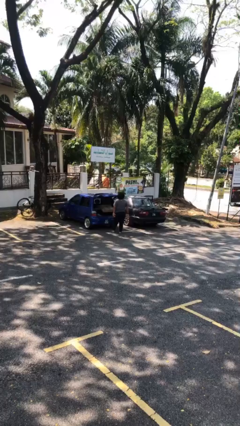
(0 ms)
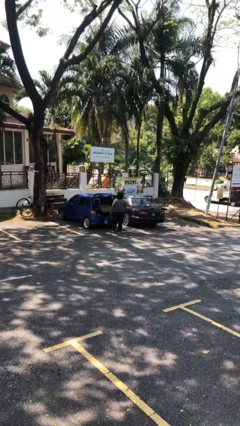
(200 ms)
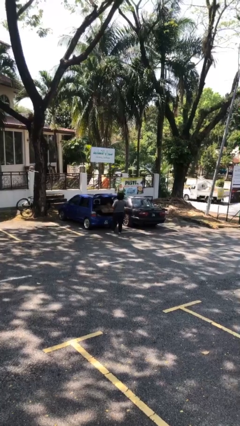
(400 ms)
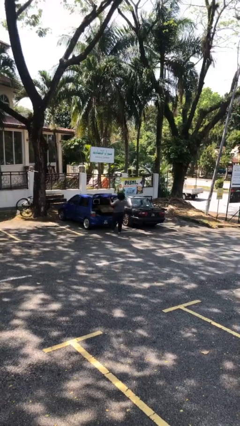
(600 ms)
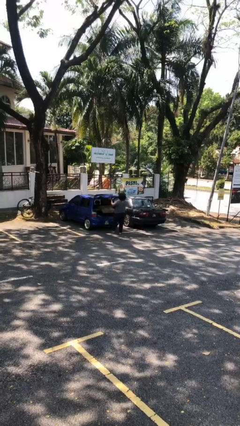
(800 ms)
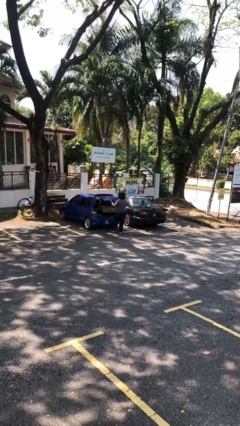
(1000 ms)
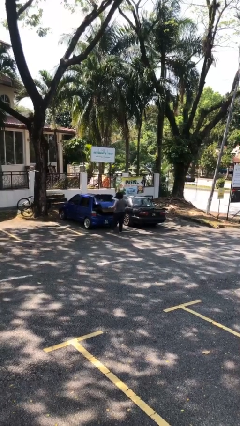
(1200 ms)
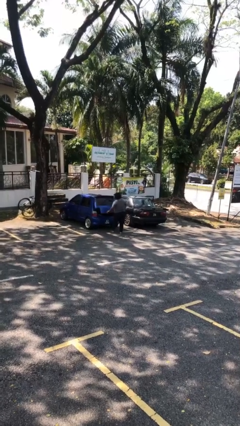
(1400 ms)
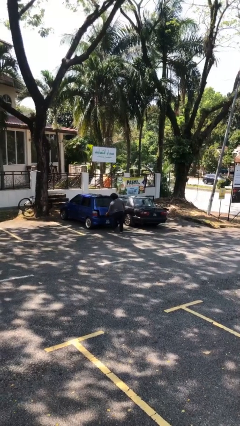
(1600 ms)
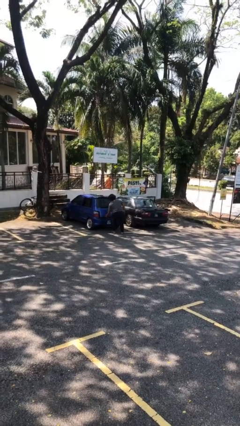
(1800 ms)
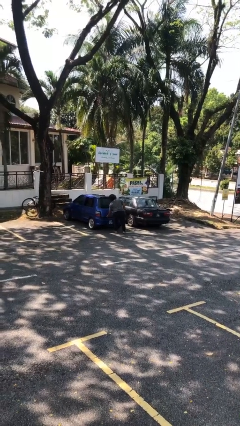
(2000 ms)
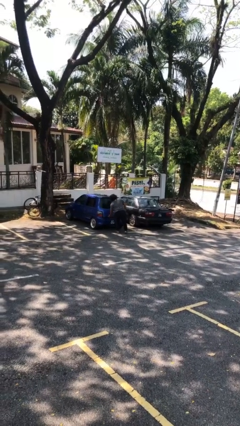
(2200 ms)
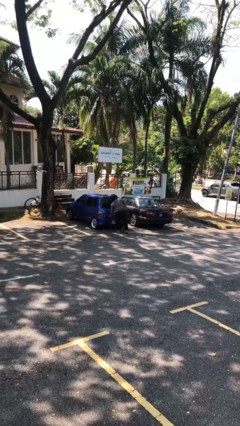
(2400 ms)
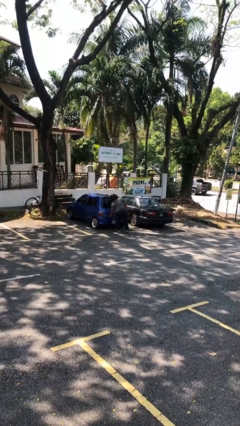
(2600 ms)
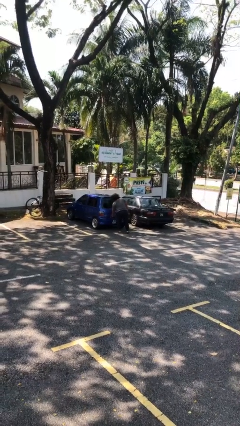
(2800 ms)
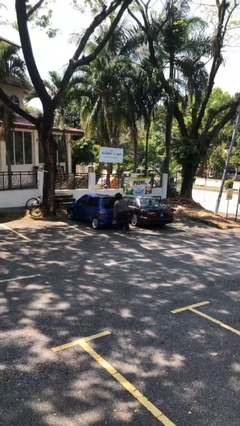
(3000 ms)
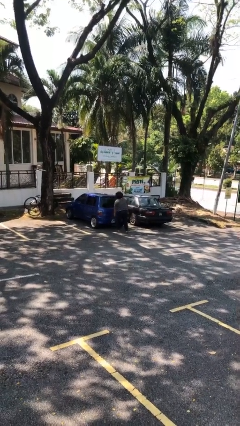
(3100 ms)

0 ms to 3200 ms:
person closes car trunk

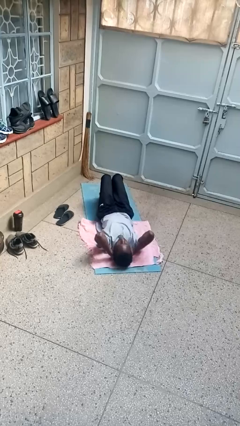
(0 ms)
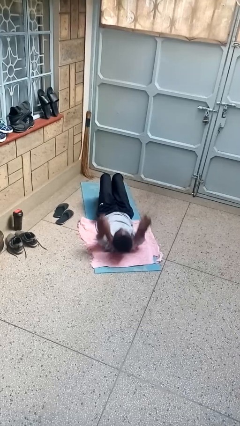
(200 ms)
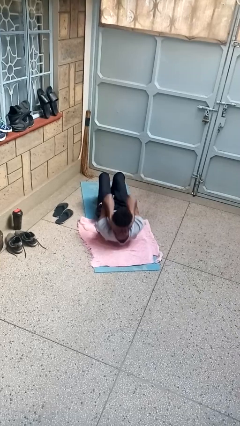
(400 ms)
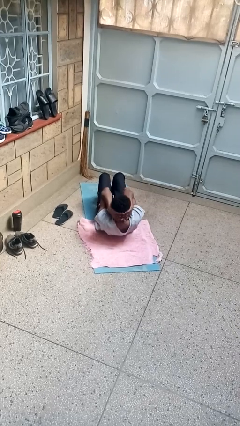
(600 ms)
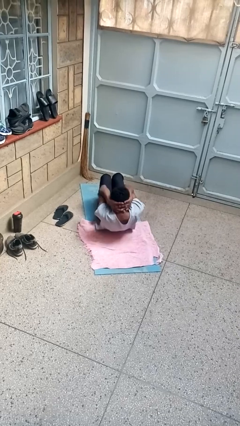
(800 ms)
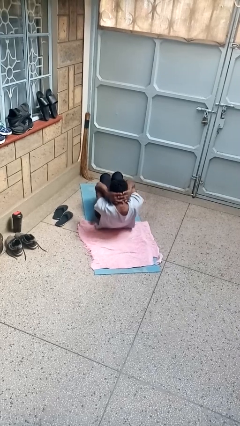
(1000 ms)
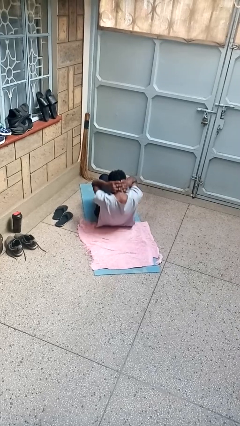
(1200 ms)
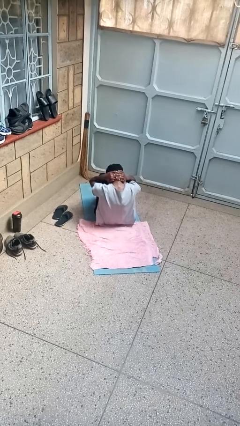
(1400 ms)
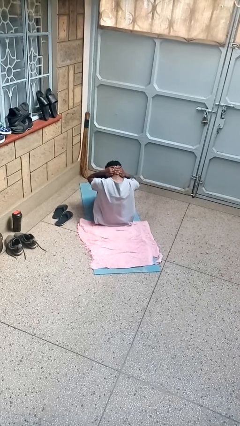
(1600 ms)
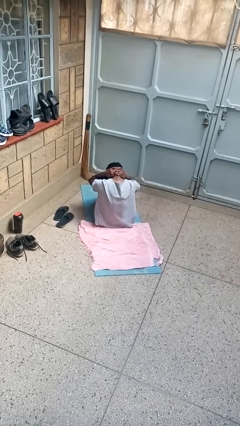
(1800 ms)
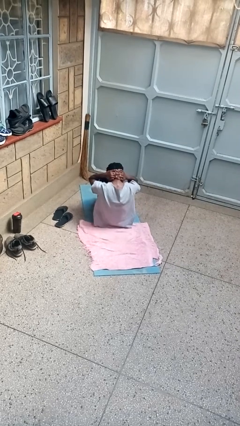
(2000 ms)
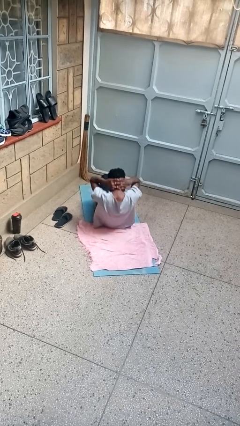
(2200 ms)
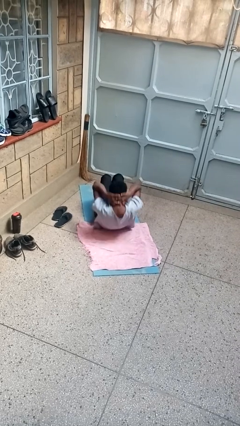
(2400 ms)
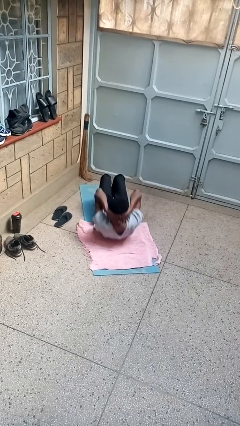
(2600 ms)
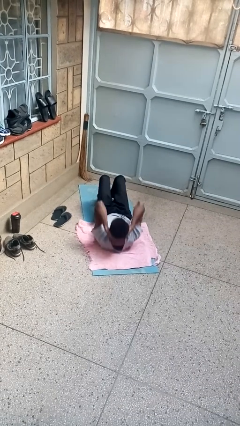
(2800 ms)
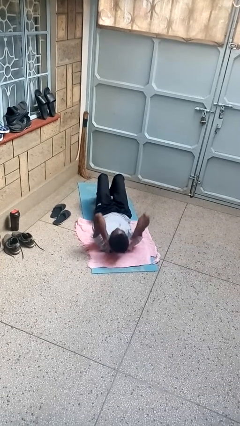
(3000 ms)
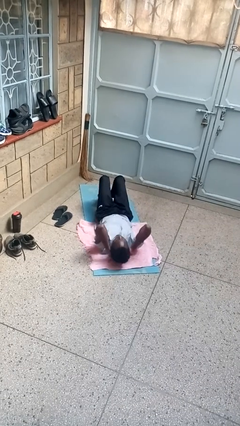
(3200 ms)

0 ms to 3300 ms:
person exercises with situp

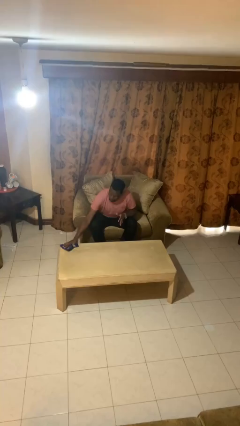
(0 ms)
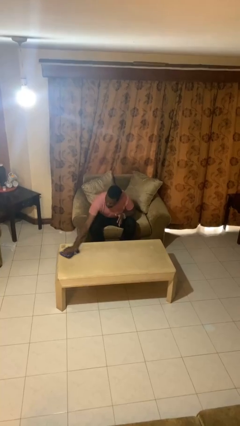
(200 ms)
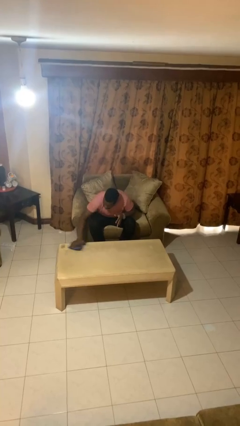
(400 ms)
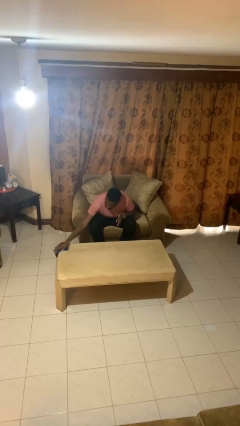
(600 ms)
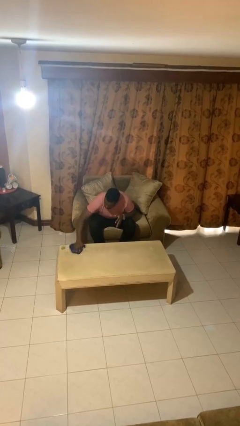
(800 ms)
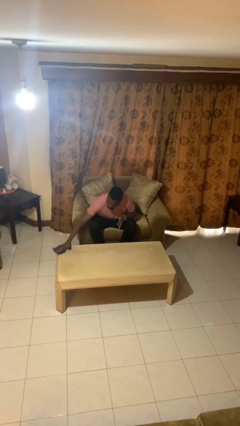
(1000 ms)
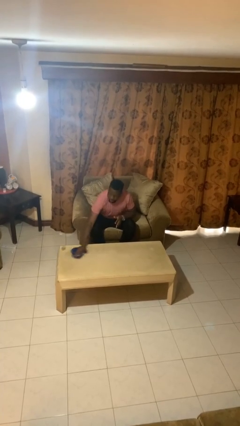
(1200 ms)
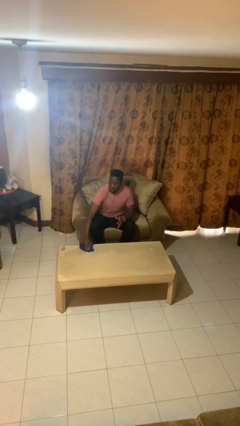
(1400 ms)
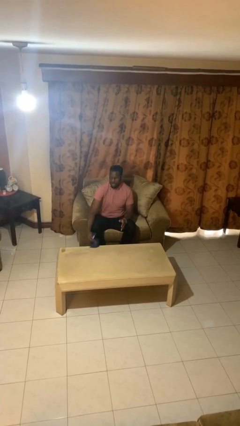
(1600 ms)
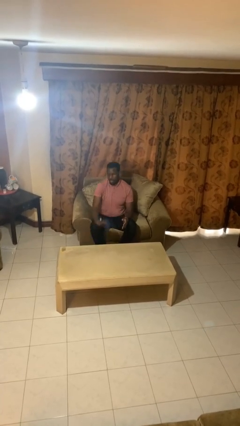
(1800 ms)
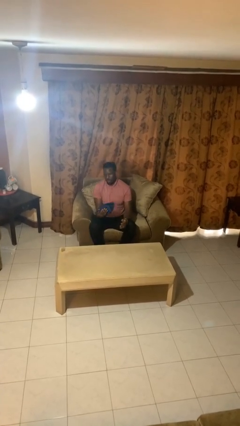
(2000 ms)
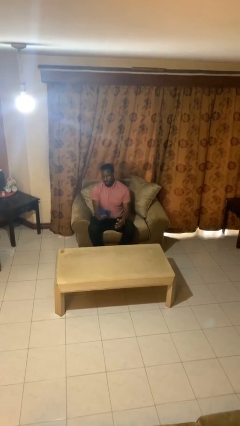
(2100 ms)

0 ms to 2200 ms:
person cleans table with rag

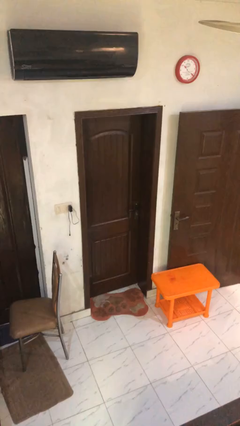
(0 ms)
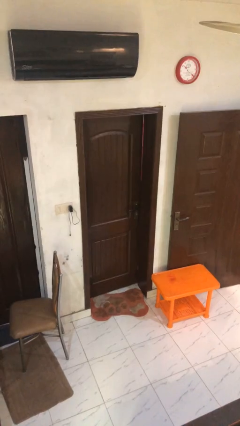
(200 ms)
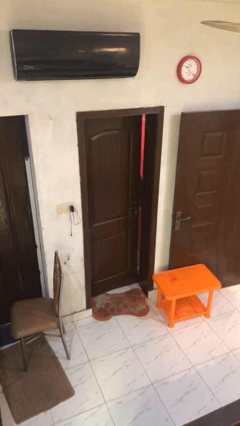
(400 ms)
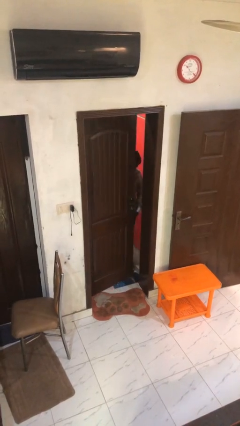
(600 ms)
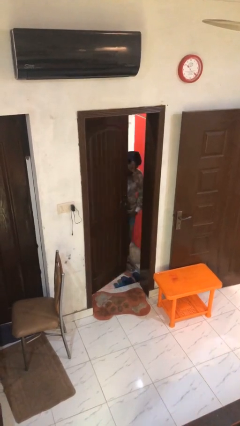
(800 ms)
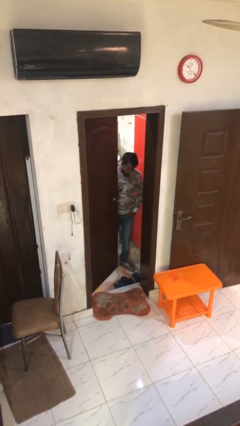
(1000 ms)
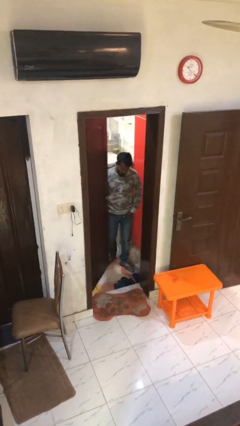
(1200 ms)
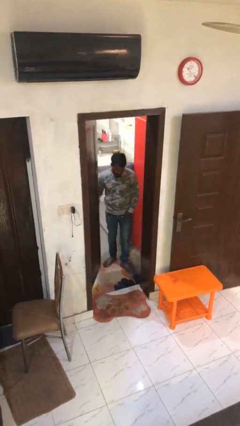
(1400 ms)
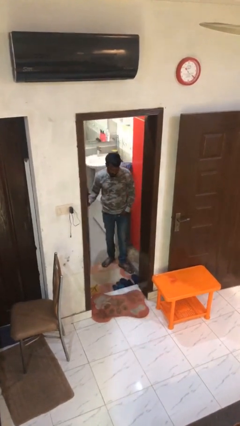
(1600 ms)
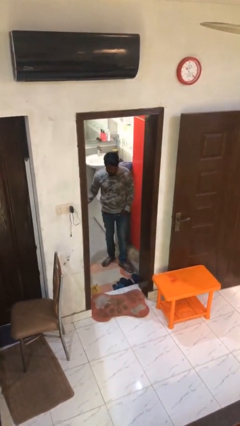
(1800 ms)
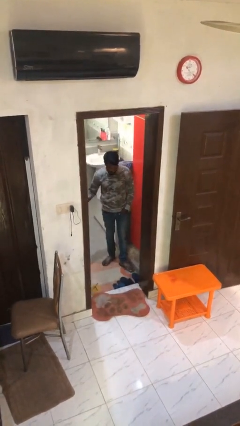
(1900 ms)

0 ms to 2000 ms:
person opens facility door

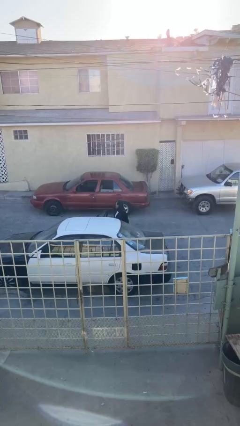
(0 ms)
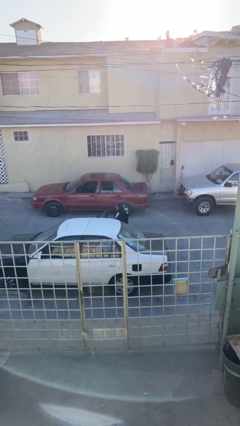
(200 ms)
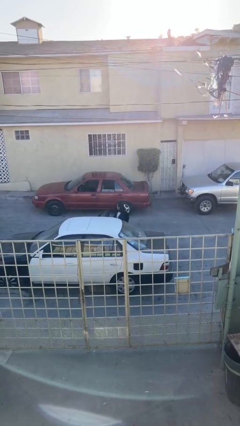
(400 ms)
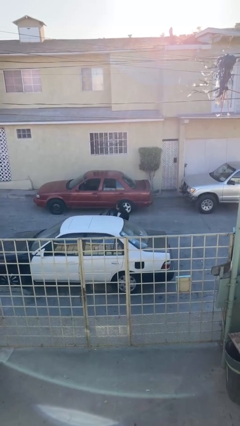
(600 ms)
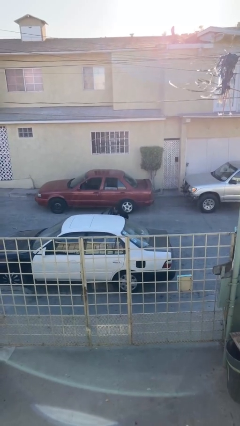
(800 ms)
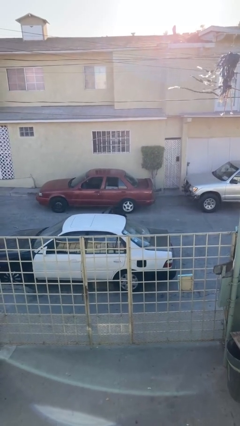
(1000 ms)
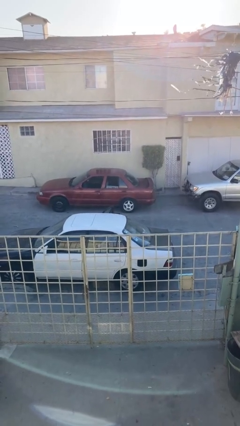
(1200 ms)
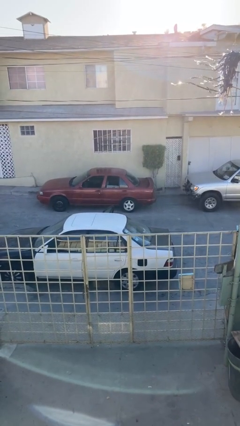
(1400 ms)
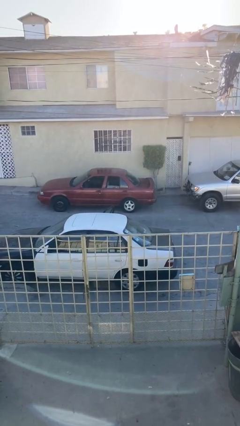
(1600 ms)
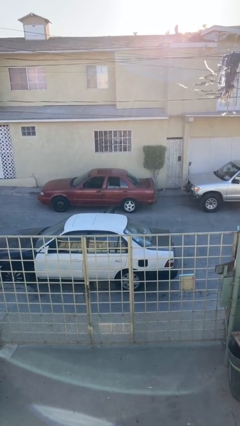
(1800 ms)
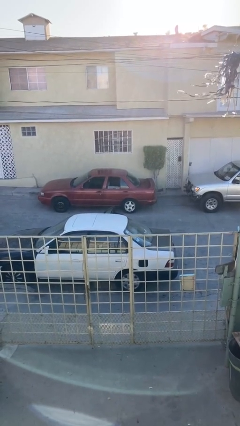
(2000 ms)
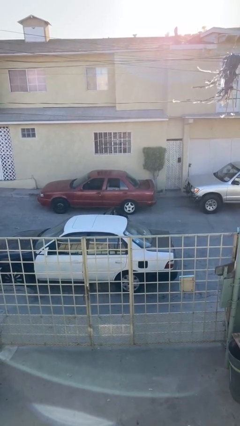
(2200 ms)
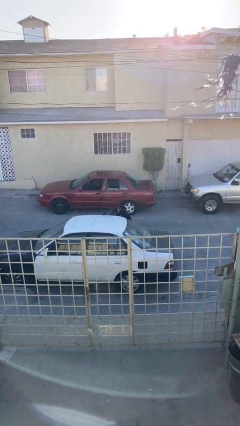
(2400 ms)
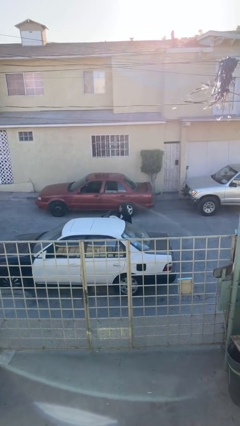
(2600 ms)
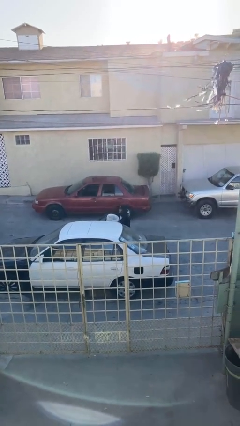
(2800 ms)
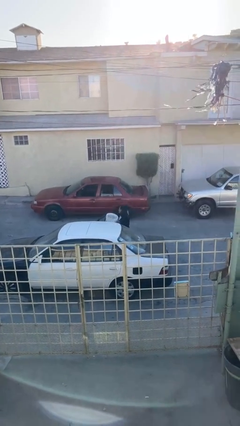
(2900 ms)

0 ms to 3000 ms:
person unloads car

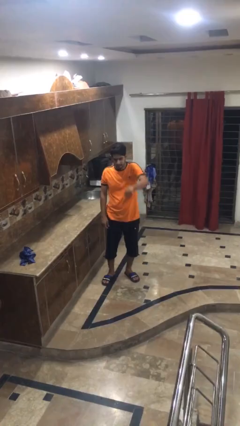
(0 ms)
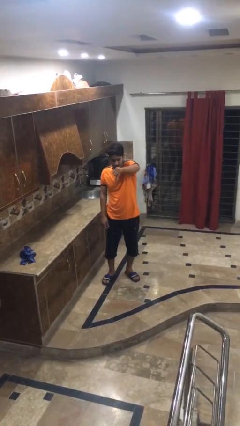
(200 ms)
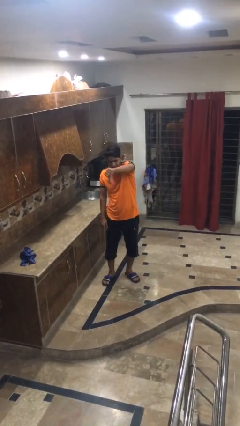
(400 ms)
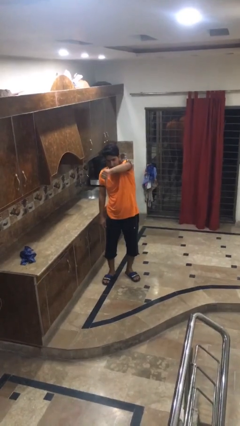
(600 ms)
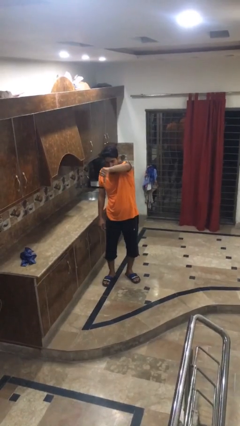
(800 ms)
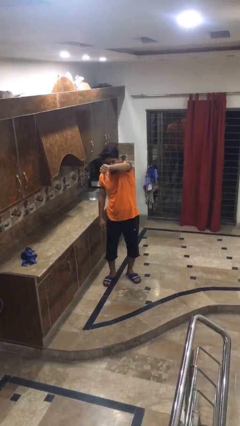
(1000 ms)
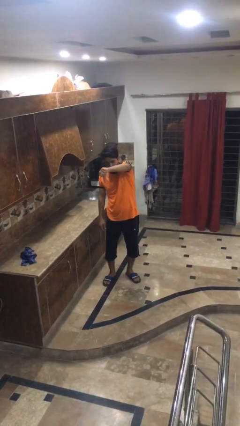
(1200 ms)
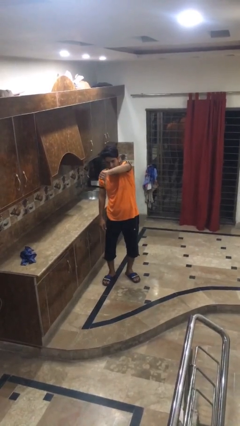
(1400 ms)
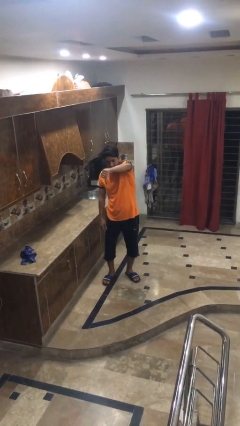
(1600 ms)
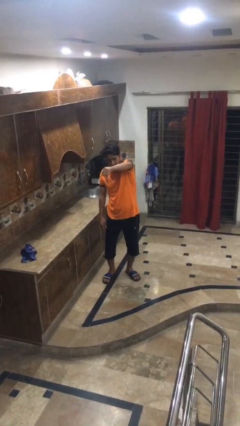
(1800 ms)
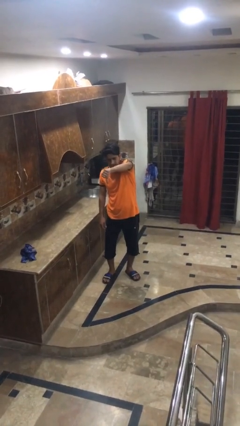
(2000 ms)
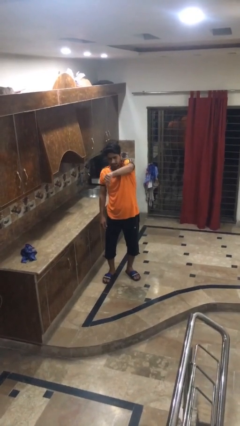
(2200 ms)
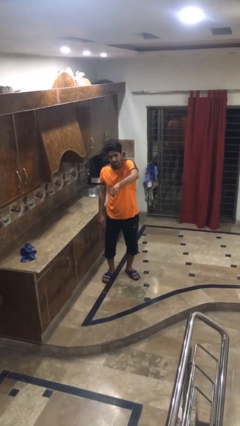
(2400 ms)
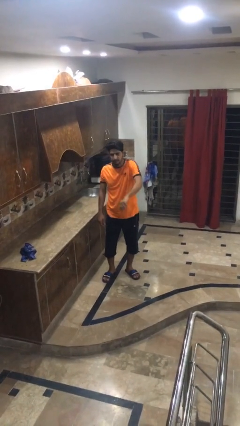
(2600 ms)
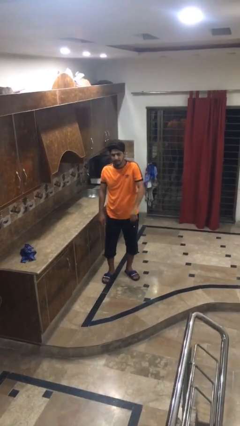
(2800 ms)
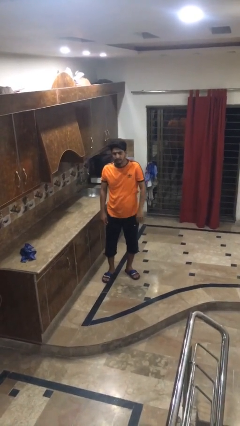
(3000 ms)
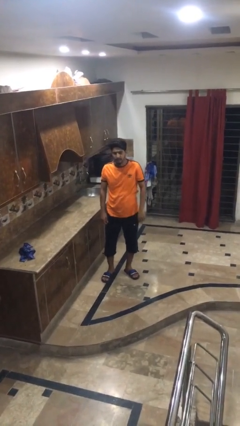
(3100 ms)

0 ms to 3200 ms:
person gestures thumbs down

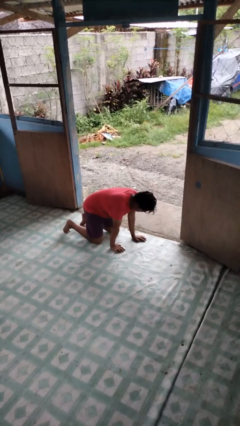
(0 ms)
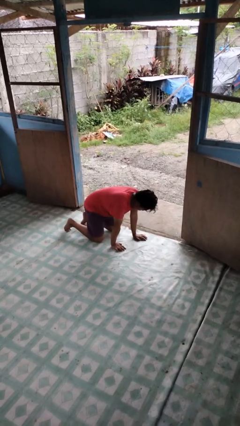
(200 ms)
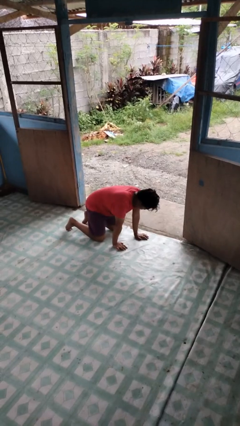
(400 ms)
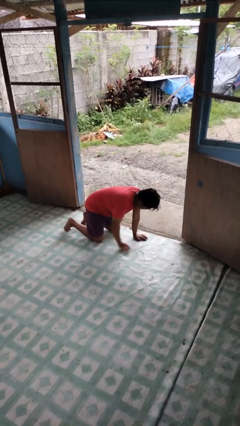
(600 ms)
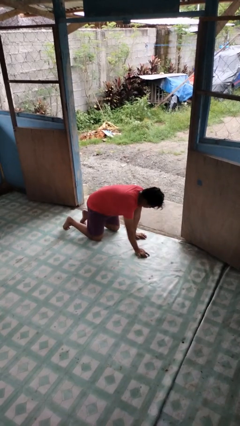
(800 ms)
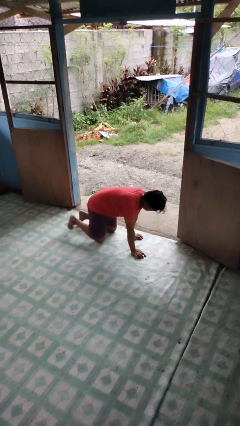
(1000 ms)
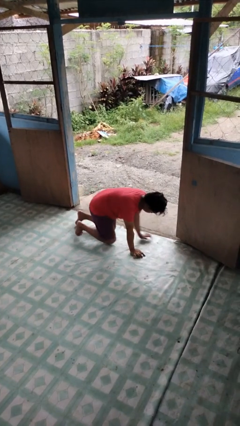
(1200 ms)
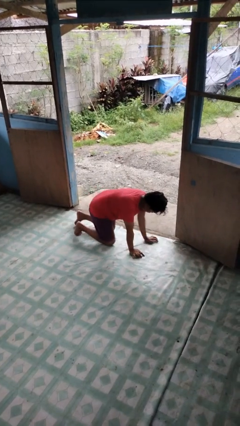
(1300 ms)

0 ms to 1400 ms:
person crawls
